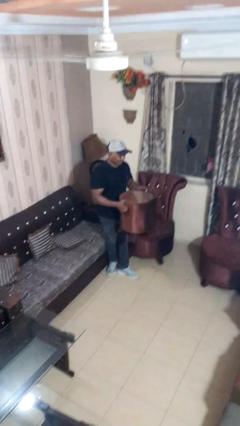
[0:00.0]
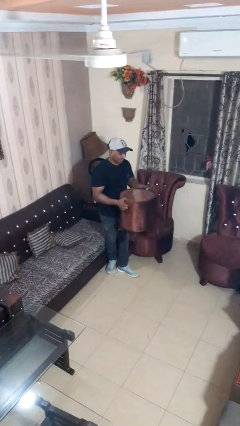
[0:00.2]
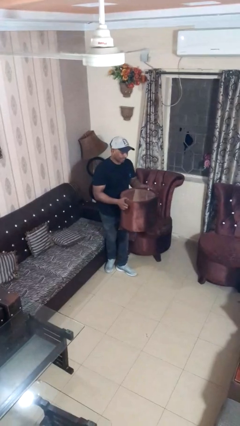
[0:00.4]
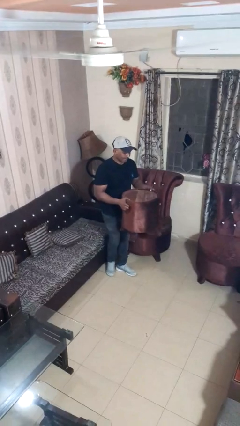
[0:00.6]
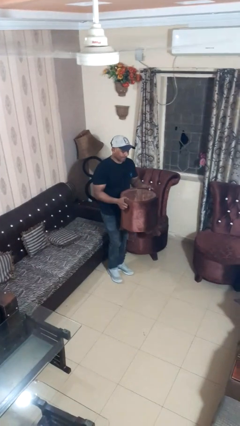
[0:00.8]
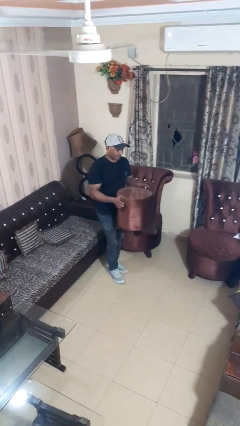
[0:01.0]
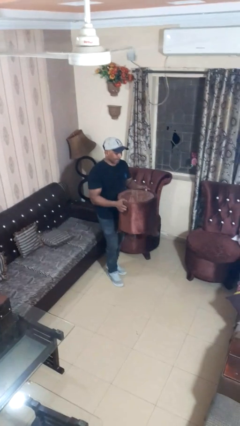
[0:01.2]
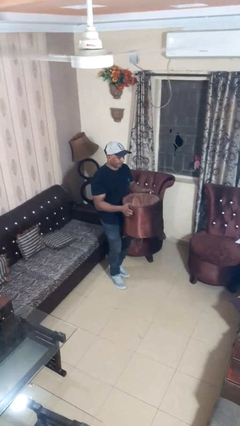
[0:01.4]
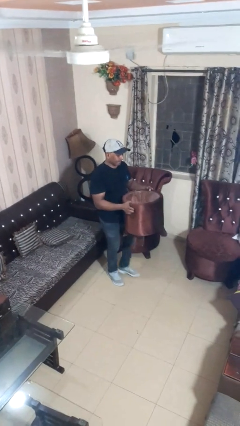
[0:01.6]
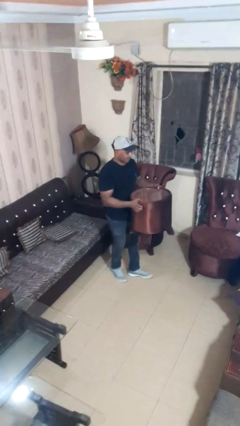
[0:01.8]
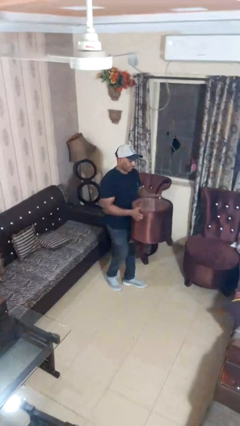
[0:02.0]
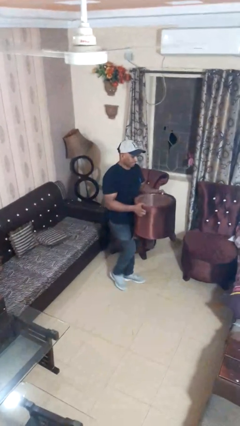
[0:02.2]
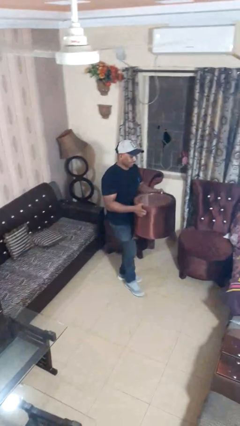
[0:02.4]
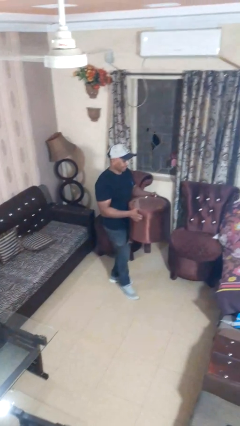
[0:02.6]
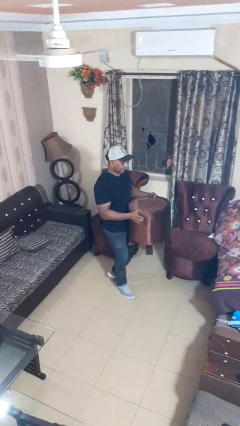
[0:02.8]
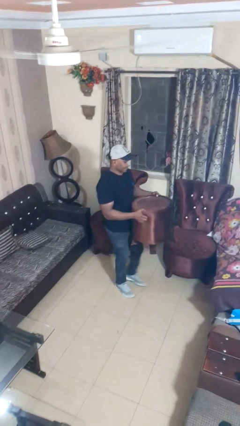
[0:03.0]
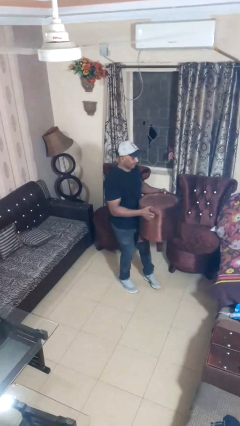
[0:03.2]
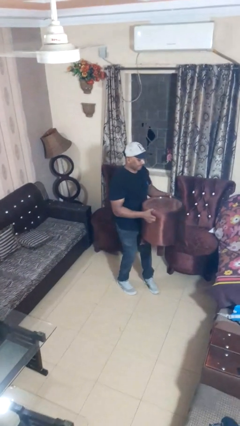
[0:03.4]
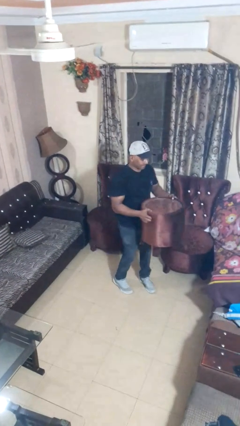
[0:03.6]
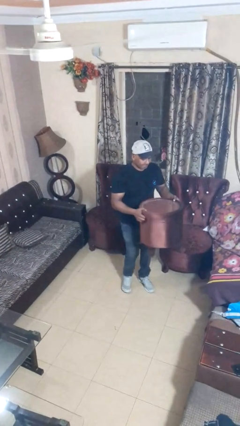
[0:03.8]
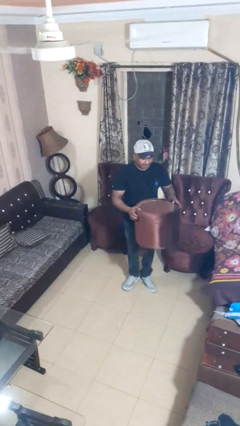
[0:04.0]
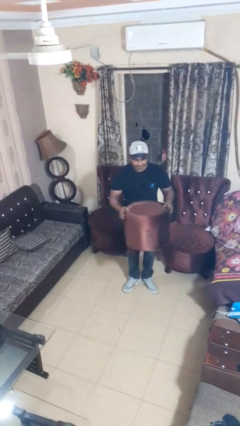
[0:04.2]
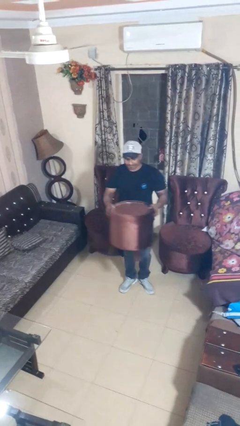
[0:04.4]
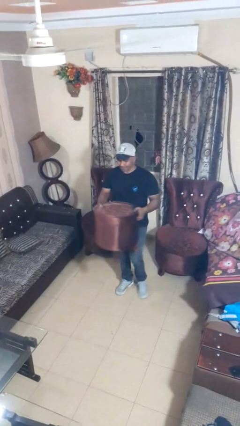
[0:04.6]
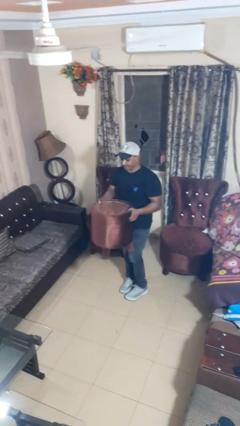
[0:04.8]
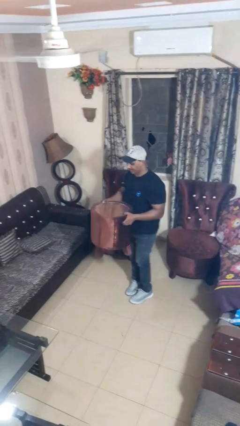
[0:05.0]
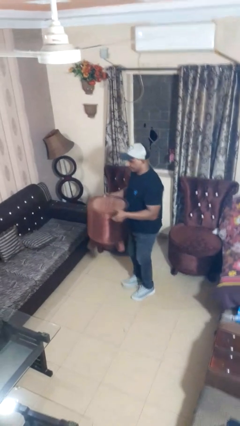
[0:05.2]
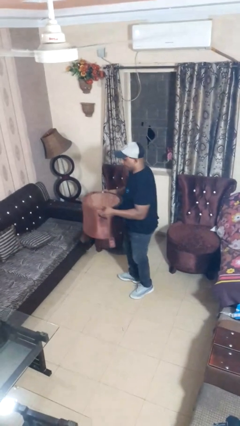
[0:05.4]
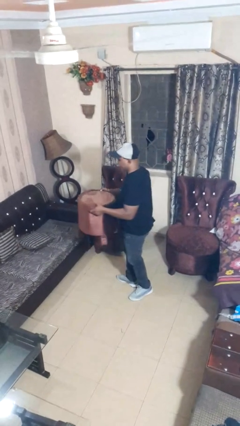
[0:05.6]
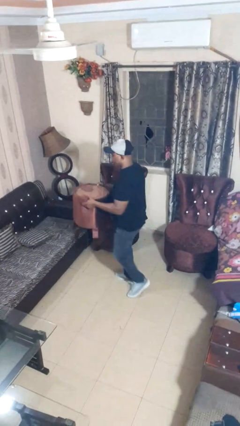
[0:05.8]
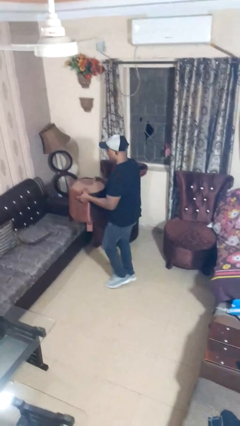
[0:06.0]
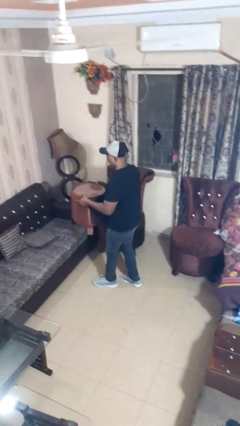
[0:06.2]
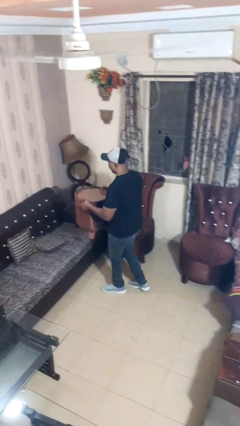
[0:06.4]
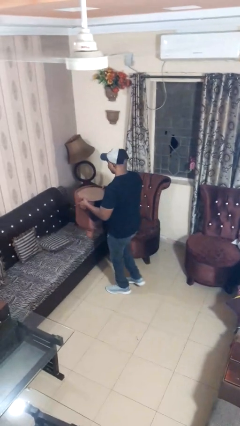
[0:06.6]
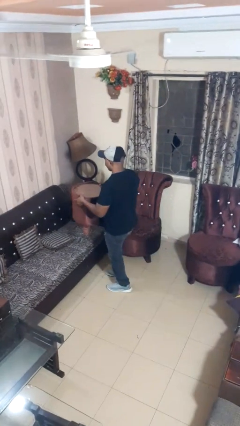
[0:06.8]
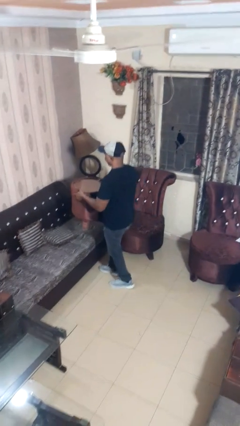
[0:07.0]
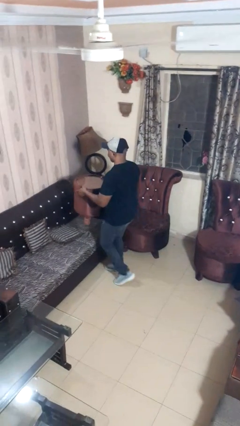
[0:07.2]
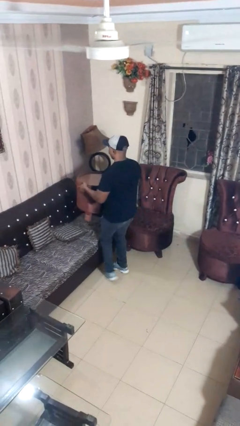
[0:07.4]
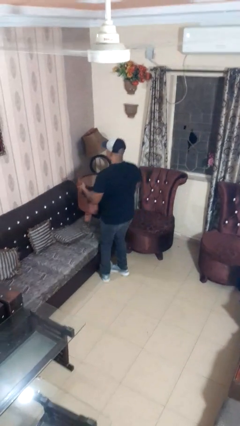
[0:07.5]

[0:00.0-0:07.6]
person carries furniture

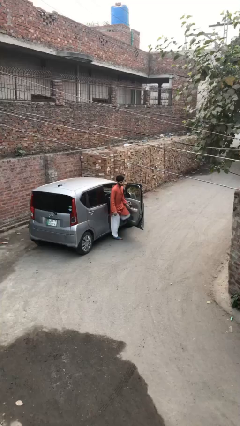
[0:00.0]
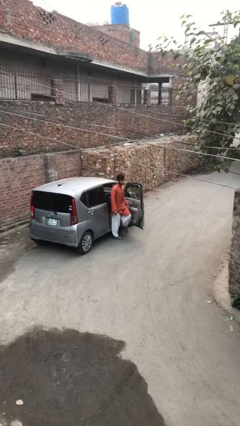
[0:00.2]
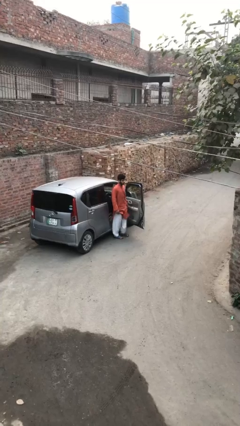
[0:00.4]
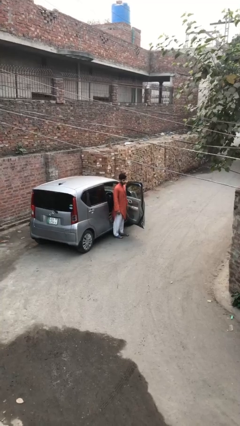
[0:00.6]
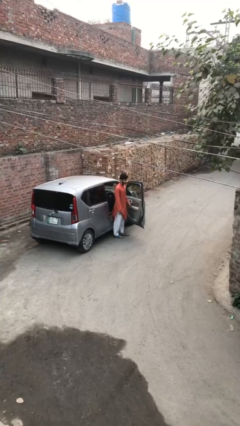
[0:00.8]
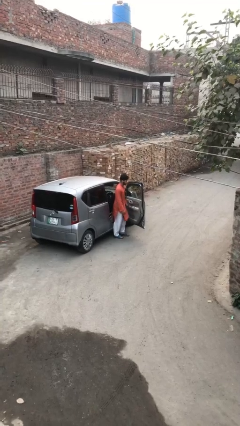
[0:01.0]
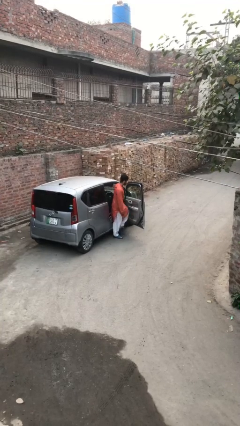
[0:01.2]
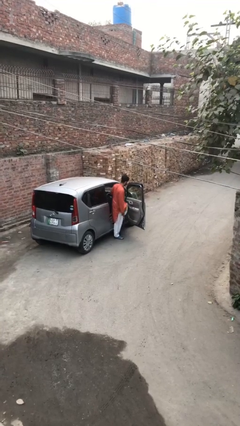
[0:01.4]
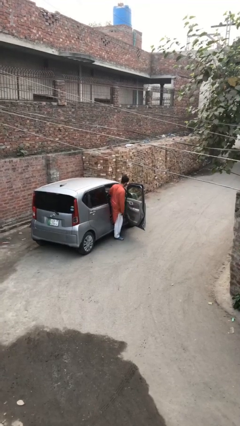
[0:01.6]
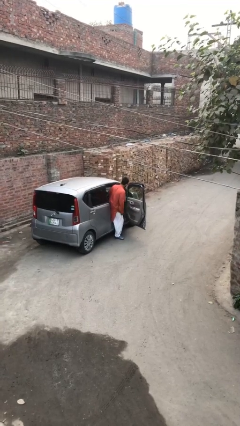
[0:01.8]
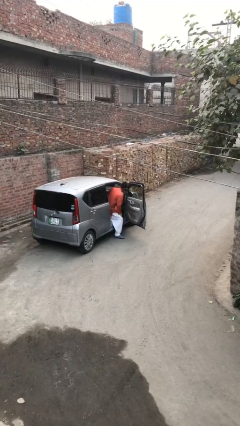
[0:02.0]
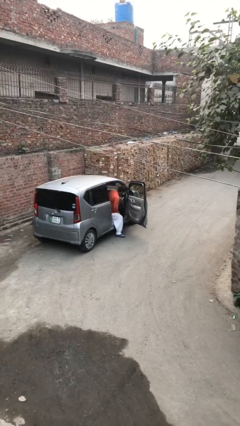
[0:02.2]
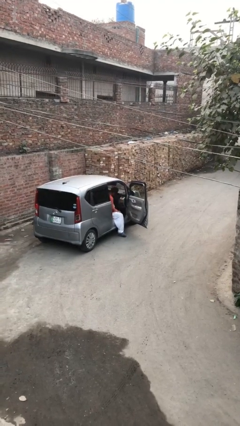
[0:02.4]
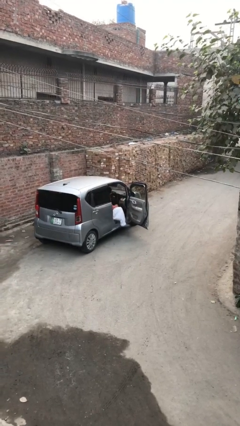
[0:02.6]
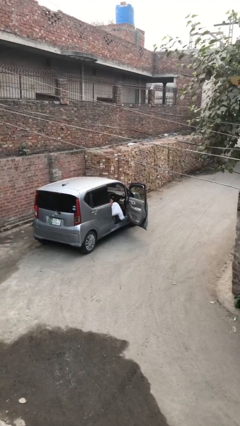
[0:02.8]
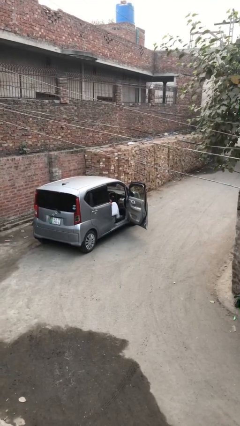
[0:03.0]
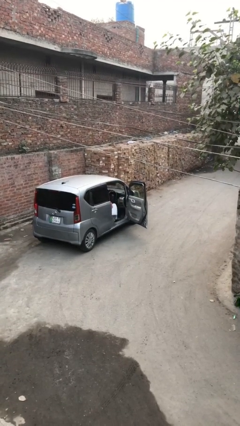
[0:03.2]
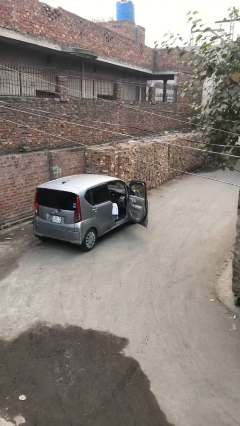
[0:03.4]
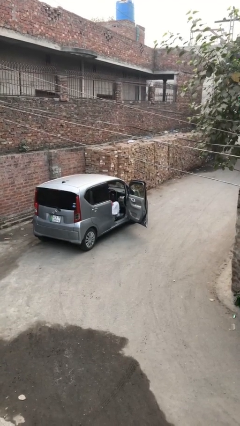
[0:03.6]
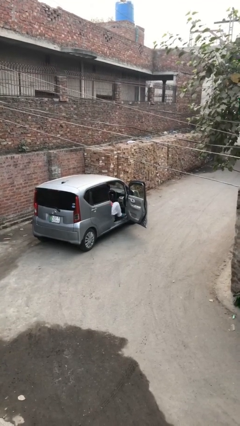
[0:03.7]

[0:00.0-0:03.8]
person enters car

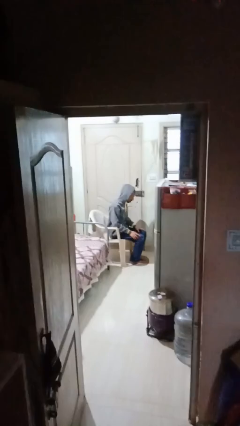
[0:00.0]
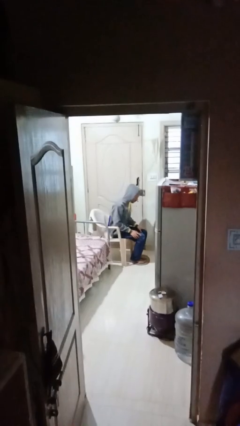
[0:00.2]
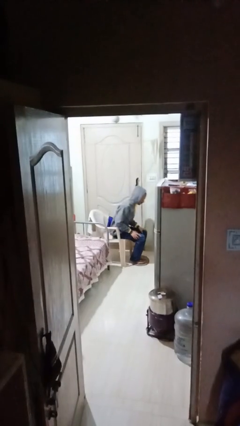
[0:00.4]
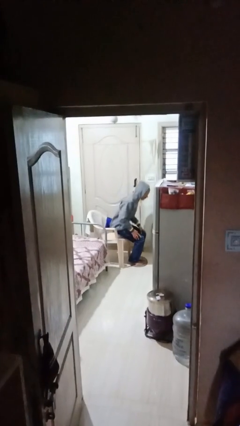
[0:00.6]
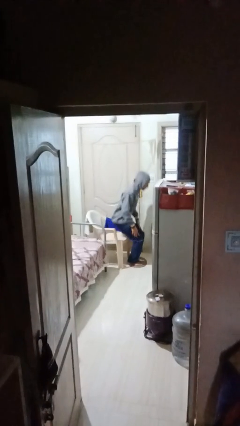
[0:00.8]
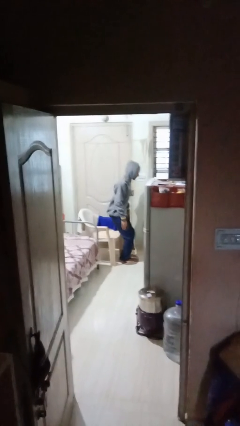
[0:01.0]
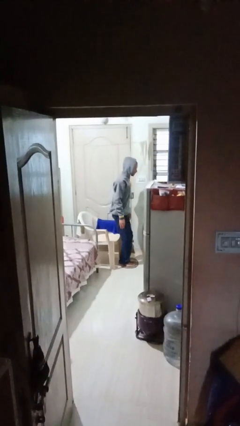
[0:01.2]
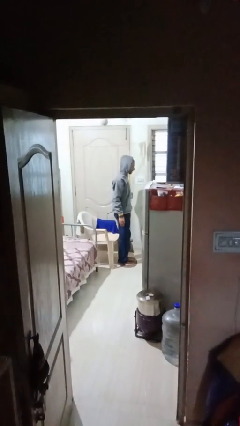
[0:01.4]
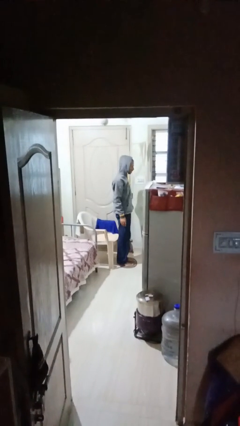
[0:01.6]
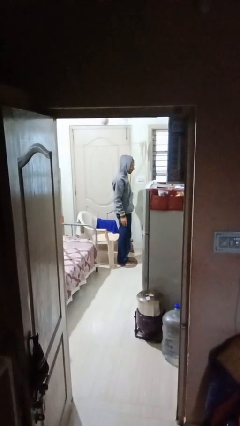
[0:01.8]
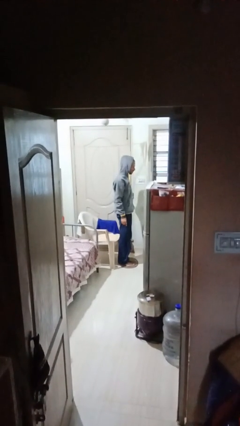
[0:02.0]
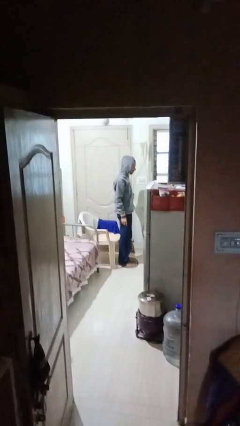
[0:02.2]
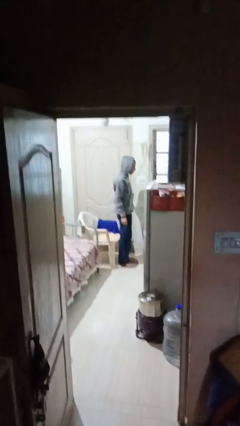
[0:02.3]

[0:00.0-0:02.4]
person stands up

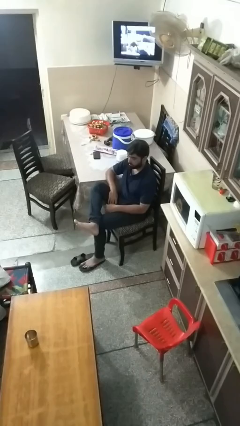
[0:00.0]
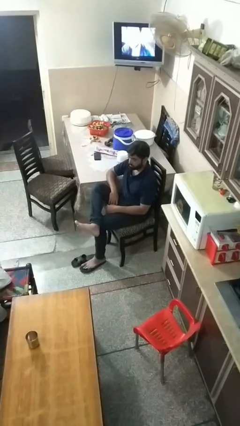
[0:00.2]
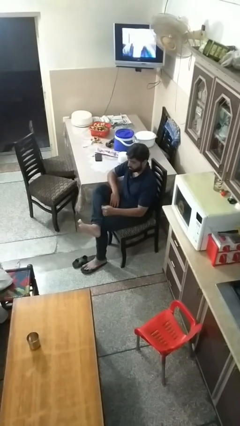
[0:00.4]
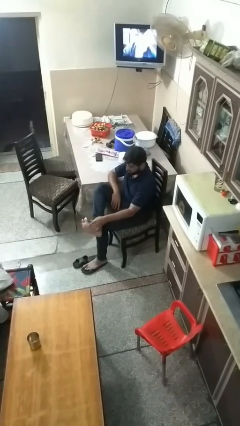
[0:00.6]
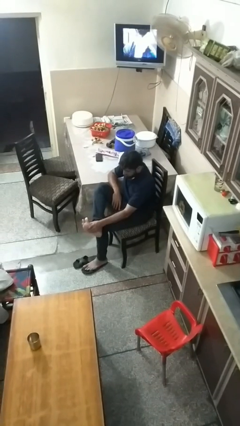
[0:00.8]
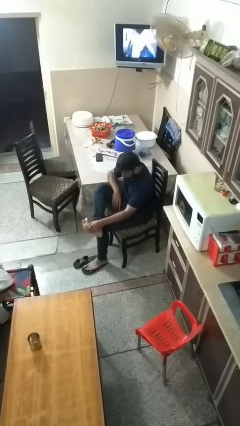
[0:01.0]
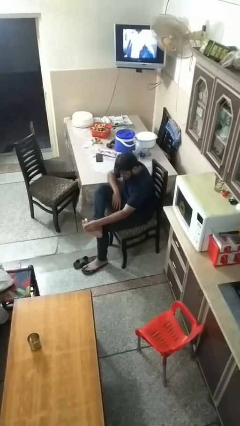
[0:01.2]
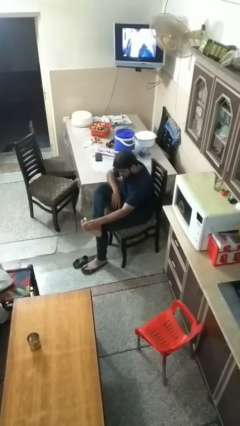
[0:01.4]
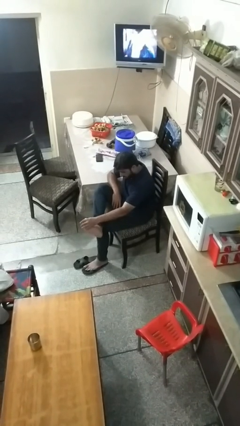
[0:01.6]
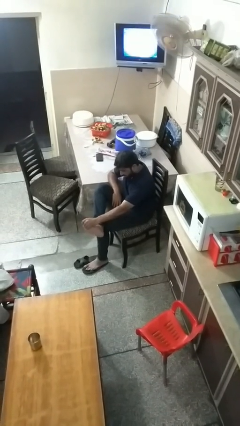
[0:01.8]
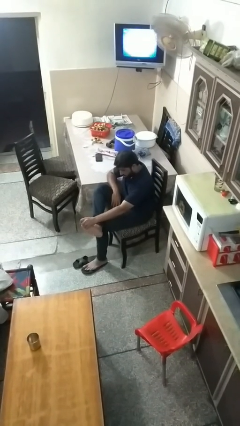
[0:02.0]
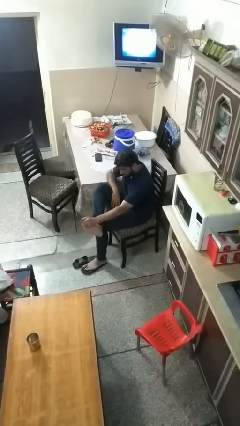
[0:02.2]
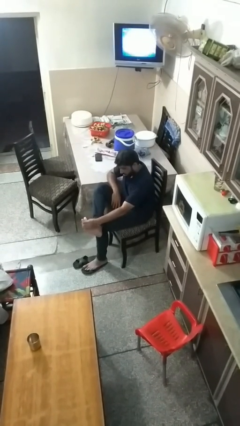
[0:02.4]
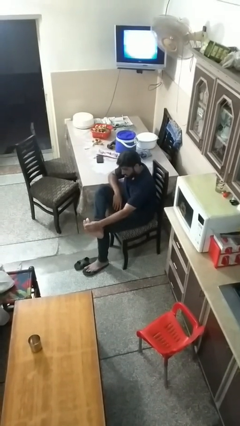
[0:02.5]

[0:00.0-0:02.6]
person rubs foot

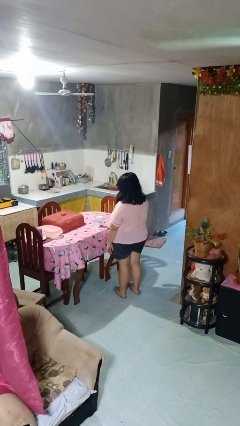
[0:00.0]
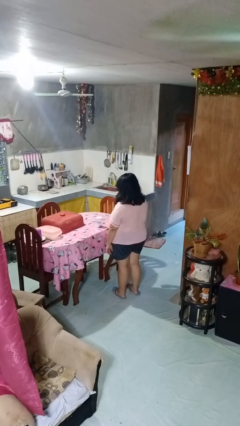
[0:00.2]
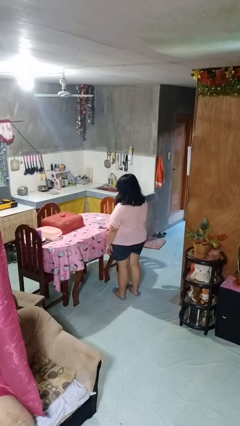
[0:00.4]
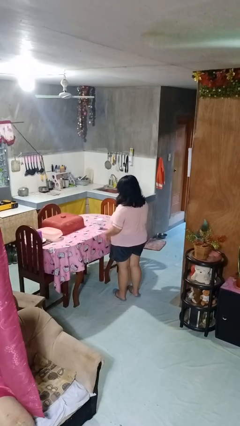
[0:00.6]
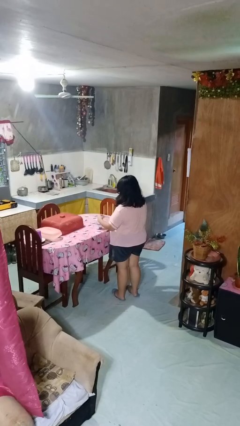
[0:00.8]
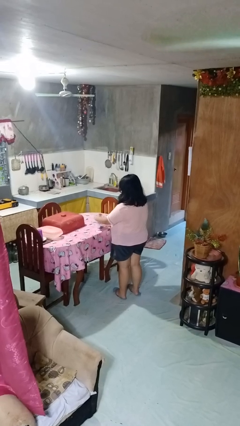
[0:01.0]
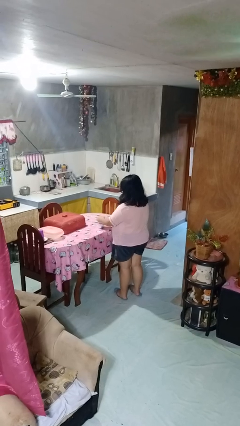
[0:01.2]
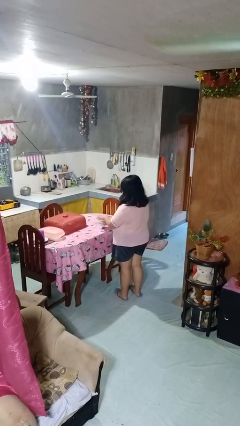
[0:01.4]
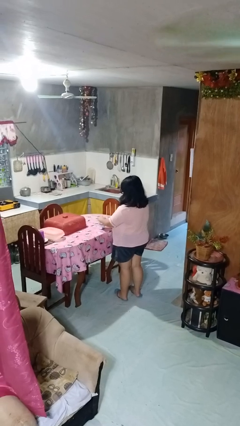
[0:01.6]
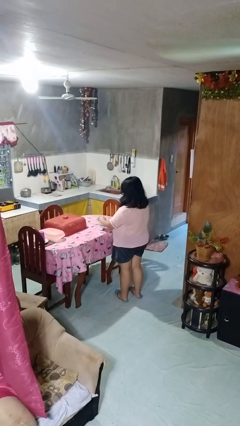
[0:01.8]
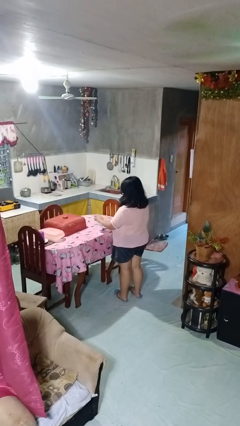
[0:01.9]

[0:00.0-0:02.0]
person opens jar
